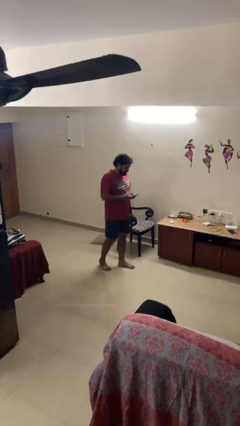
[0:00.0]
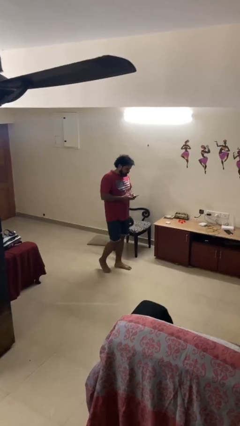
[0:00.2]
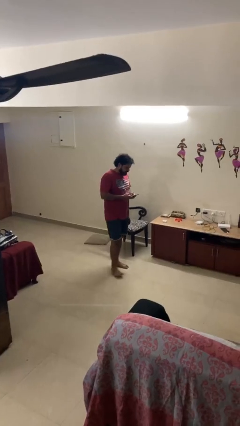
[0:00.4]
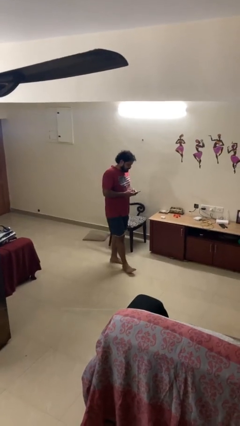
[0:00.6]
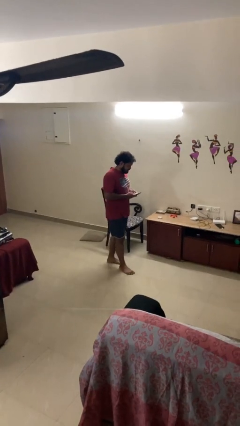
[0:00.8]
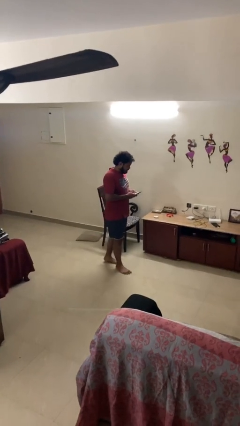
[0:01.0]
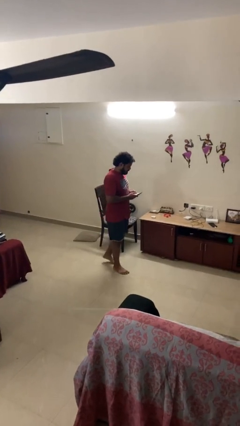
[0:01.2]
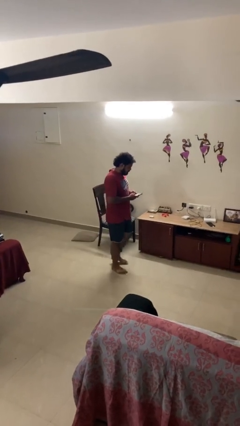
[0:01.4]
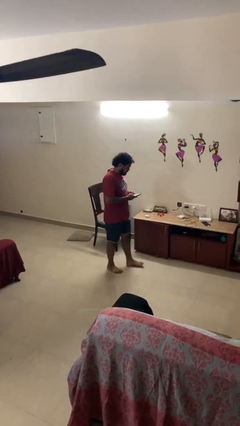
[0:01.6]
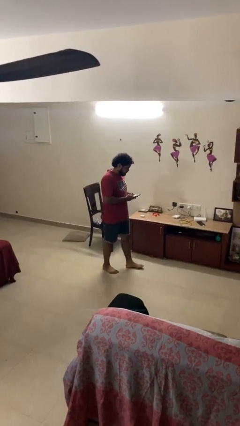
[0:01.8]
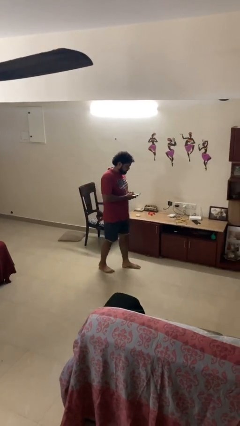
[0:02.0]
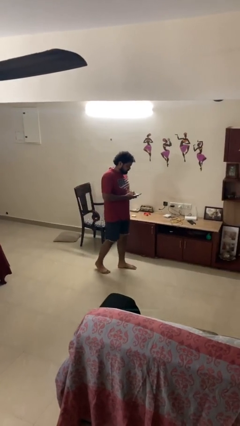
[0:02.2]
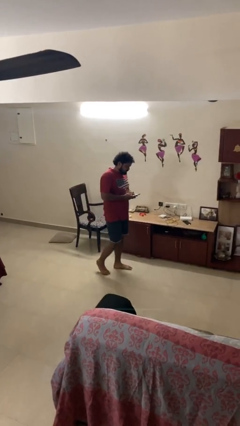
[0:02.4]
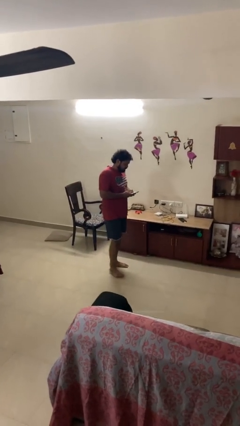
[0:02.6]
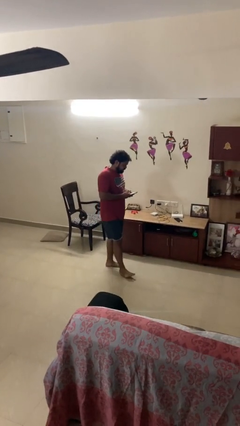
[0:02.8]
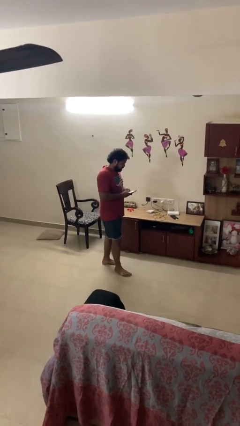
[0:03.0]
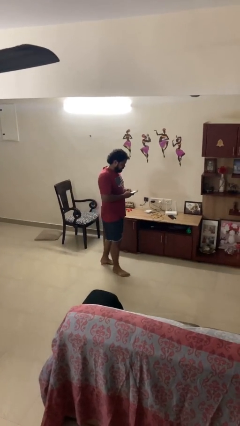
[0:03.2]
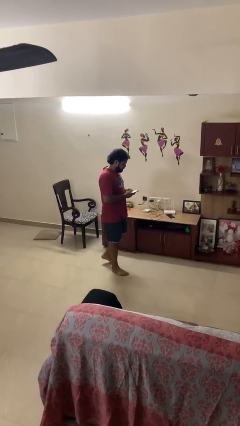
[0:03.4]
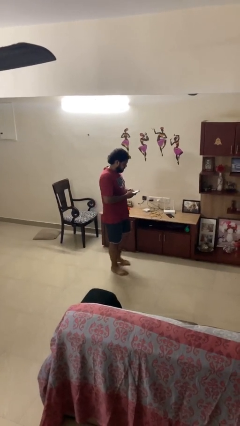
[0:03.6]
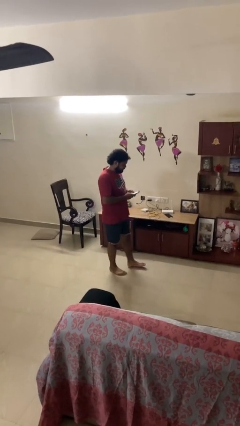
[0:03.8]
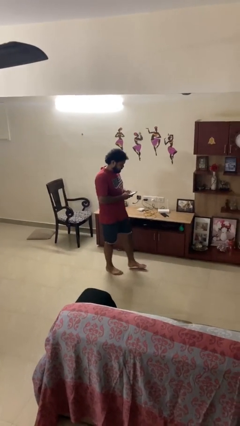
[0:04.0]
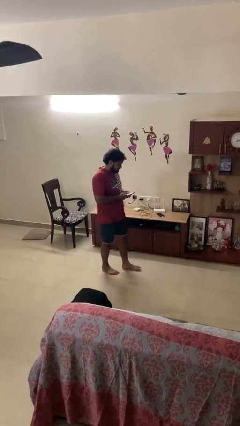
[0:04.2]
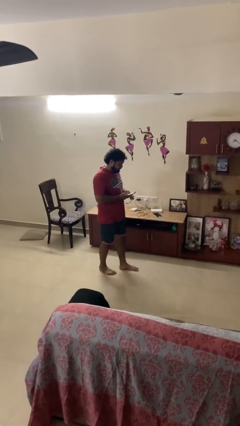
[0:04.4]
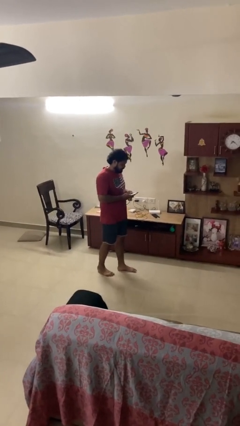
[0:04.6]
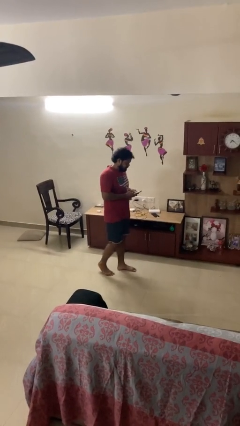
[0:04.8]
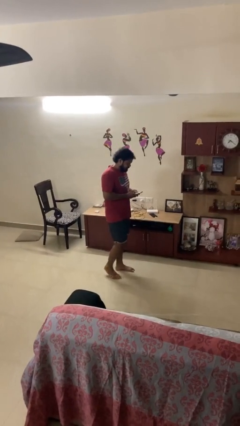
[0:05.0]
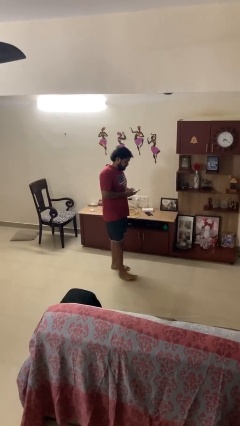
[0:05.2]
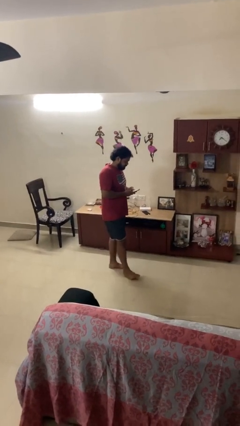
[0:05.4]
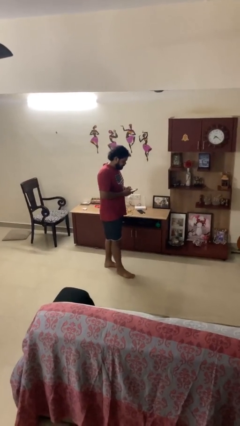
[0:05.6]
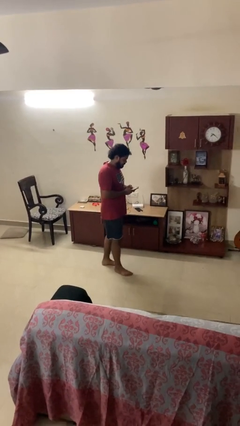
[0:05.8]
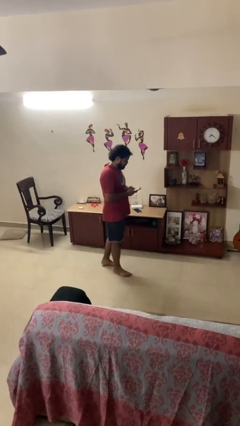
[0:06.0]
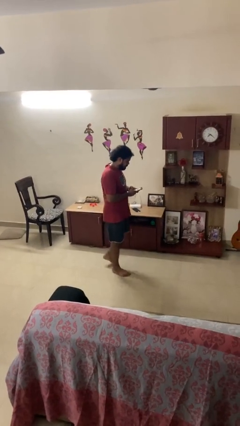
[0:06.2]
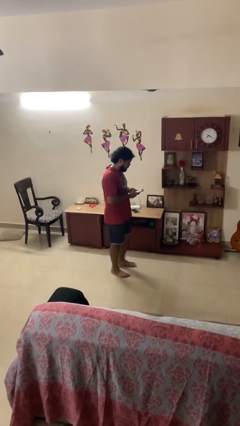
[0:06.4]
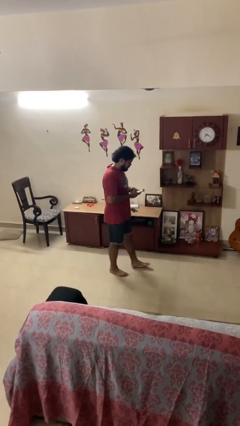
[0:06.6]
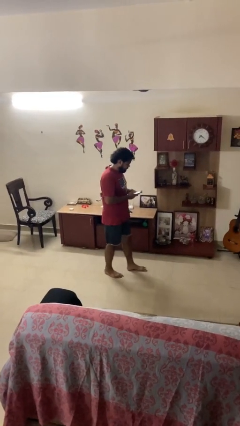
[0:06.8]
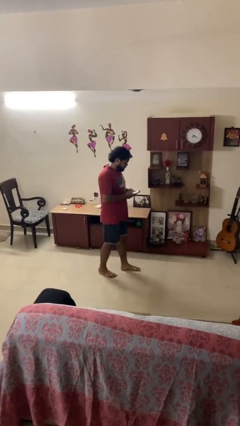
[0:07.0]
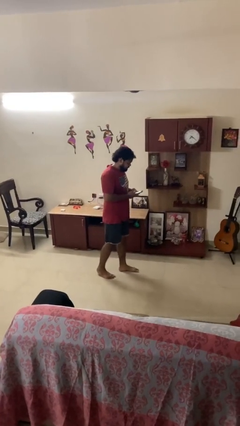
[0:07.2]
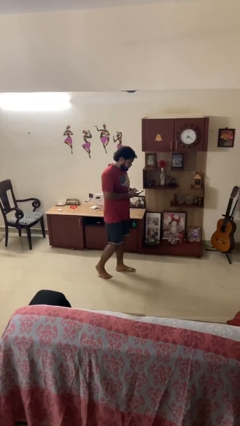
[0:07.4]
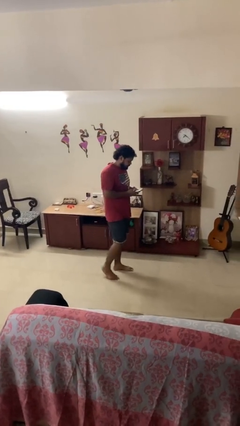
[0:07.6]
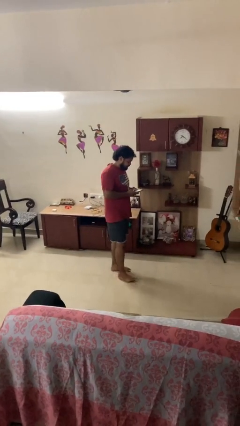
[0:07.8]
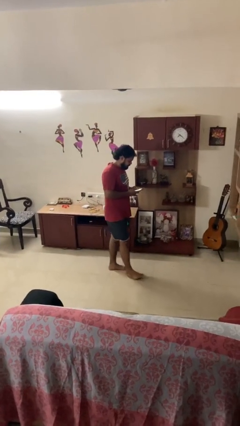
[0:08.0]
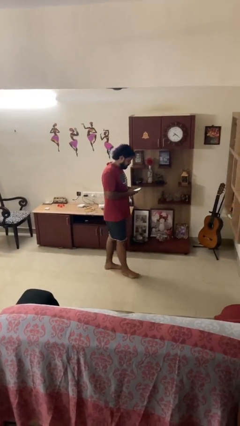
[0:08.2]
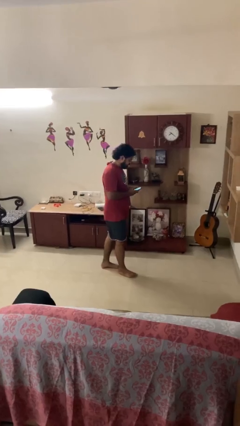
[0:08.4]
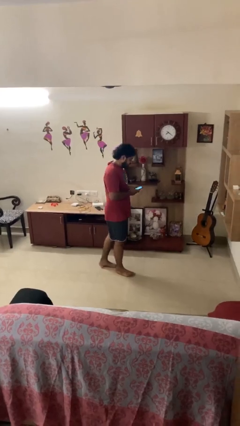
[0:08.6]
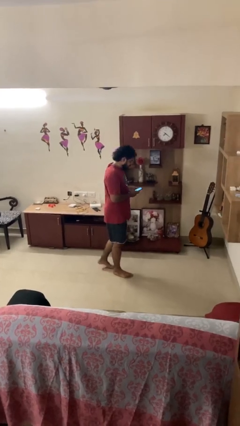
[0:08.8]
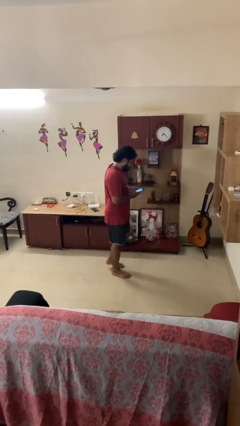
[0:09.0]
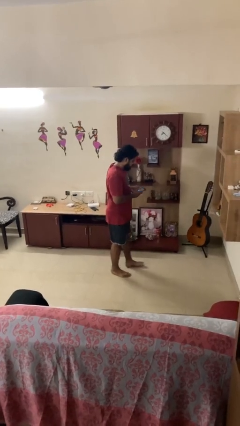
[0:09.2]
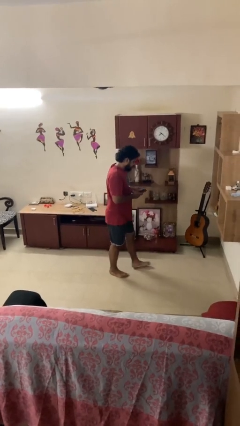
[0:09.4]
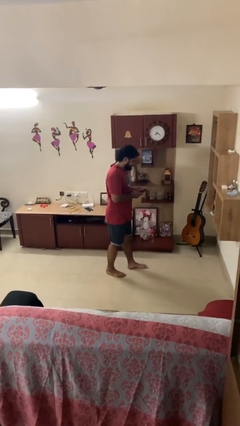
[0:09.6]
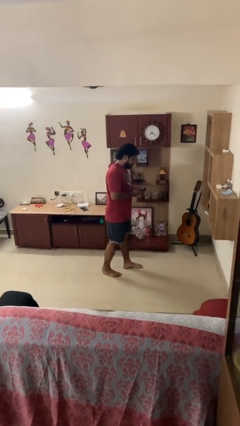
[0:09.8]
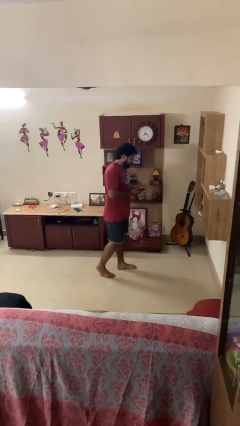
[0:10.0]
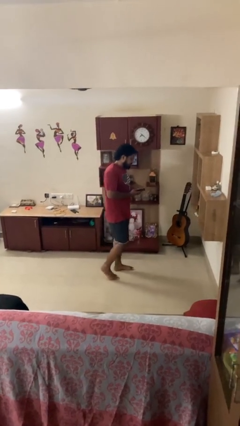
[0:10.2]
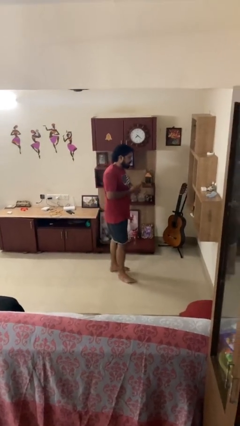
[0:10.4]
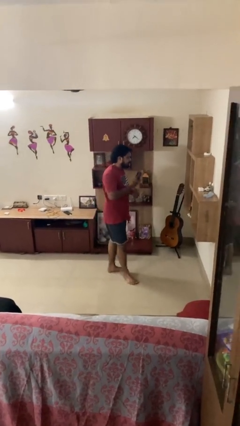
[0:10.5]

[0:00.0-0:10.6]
person texts on phone

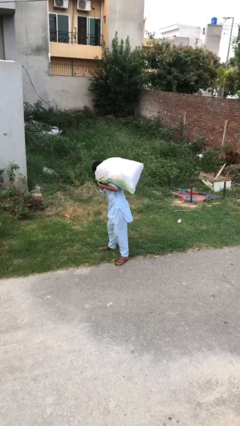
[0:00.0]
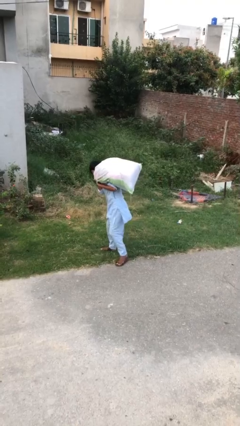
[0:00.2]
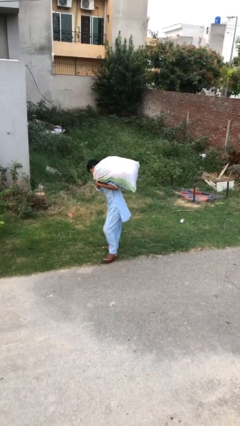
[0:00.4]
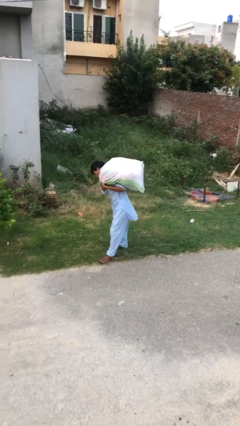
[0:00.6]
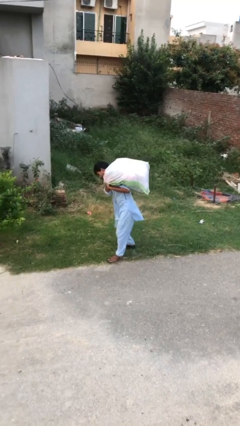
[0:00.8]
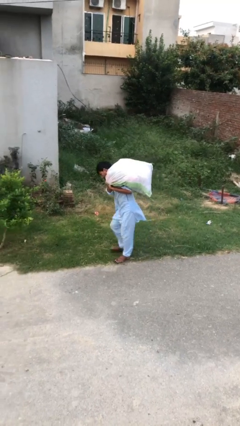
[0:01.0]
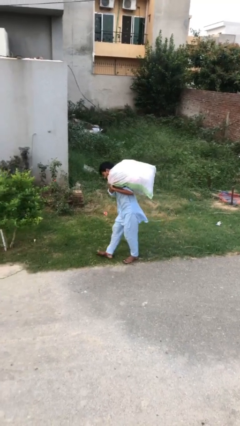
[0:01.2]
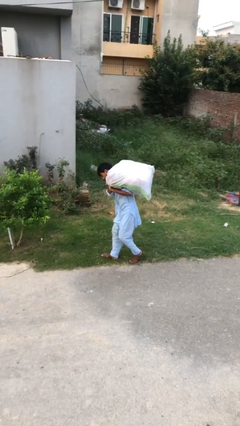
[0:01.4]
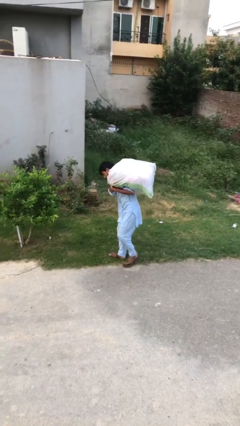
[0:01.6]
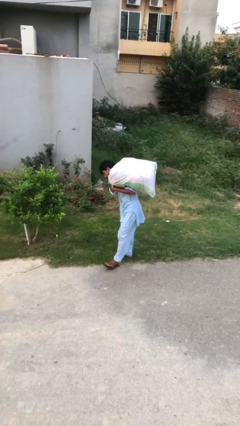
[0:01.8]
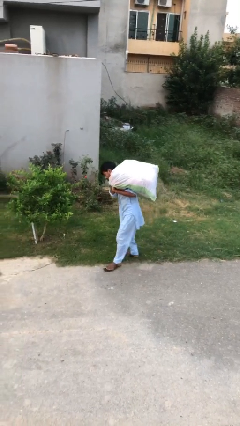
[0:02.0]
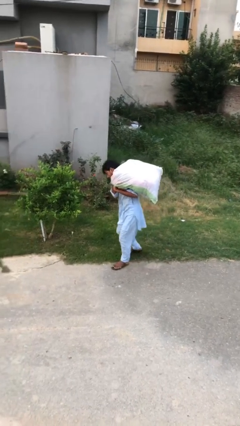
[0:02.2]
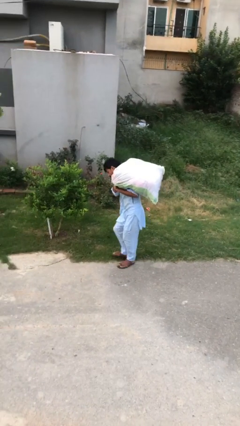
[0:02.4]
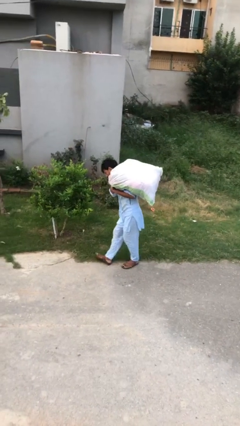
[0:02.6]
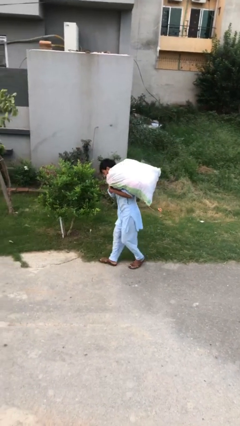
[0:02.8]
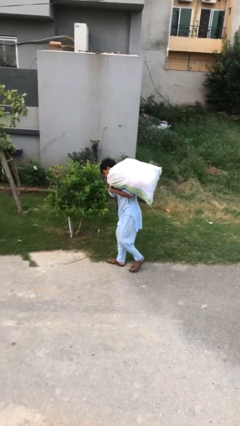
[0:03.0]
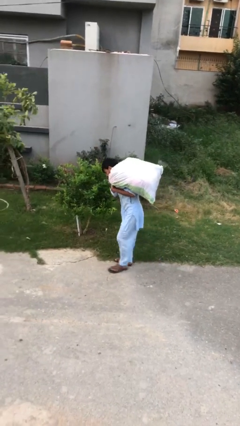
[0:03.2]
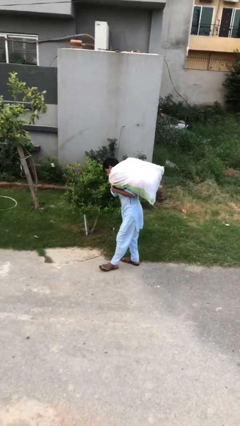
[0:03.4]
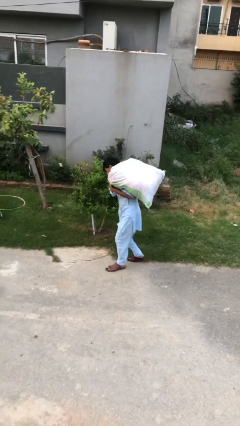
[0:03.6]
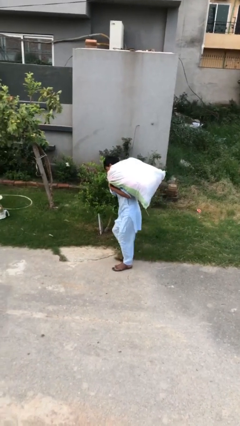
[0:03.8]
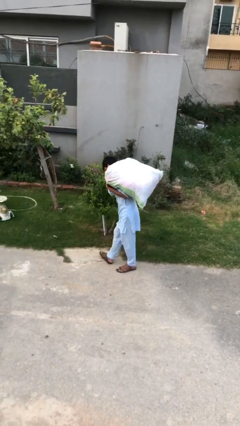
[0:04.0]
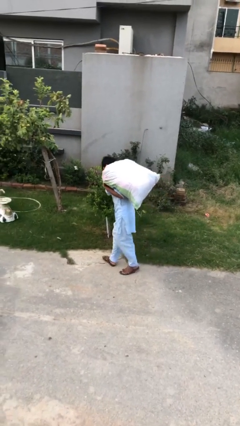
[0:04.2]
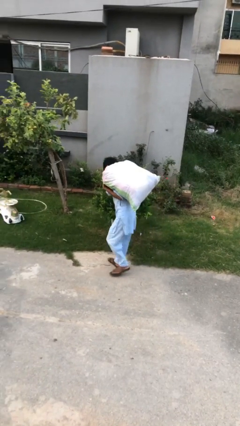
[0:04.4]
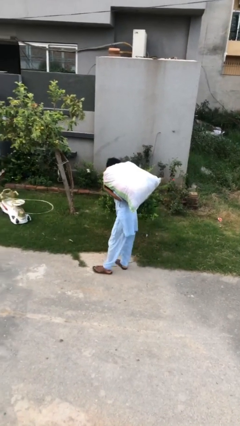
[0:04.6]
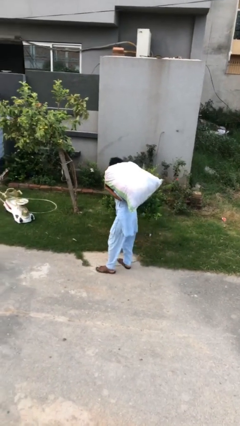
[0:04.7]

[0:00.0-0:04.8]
person carries heavy object

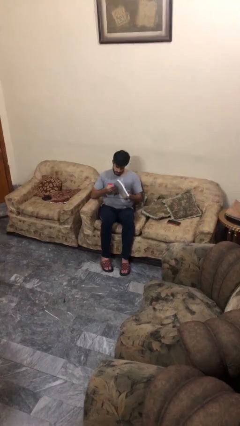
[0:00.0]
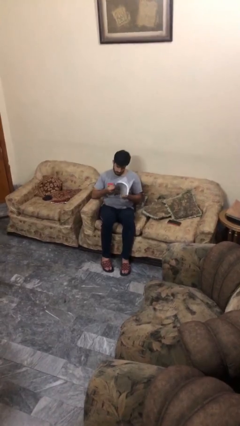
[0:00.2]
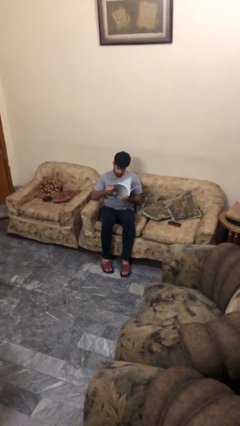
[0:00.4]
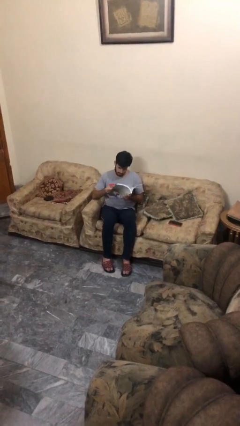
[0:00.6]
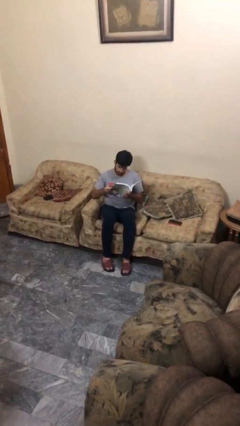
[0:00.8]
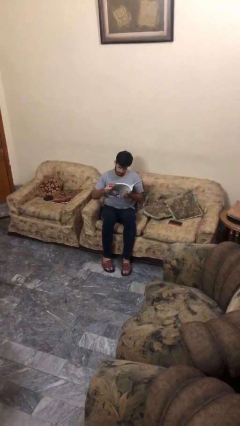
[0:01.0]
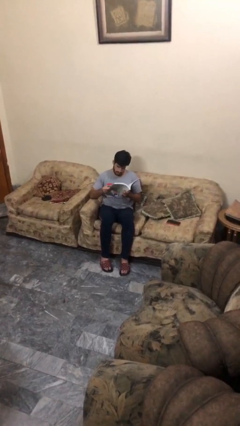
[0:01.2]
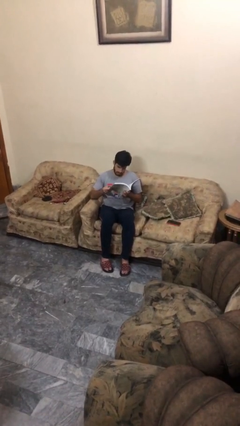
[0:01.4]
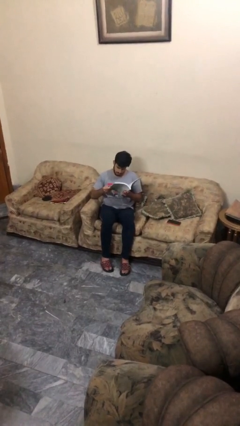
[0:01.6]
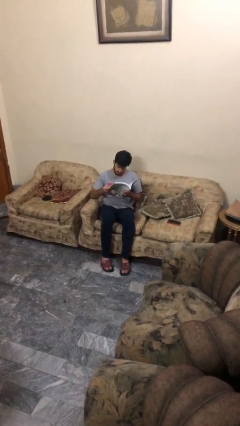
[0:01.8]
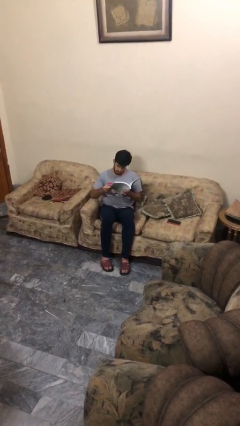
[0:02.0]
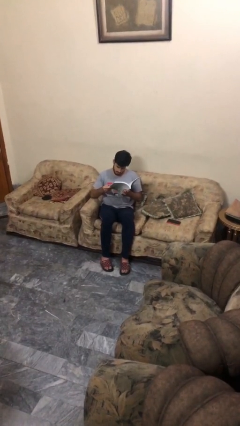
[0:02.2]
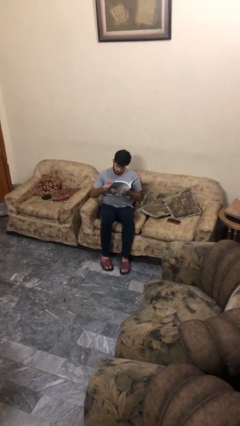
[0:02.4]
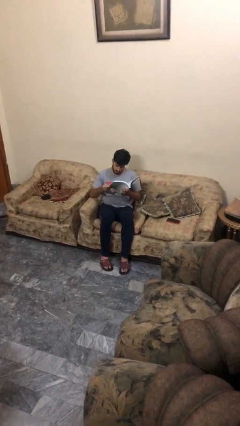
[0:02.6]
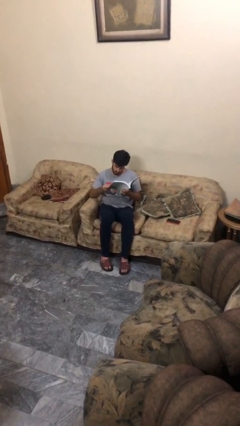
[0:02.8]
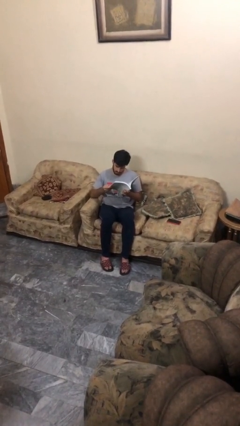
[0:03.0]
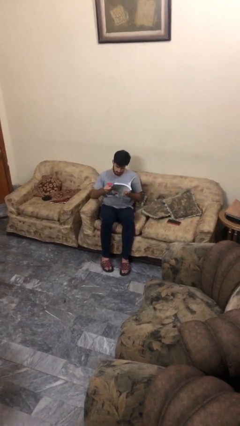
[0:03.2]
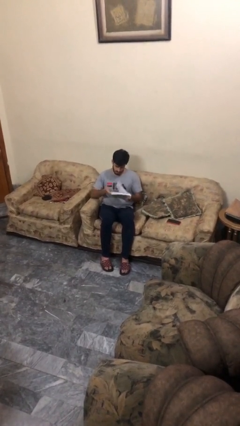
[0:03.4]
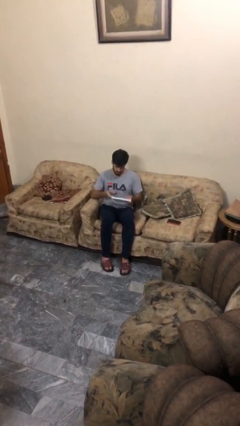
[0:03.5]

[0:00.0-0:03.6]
person reads book
